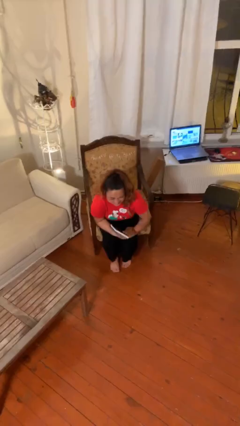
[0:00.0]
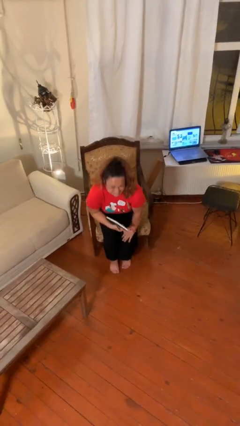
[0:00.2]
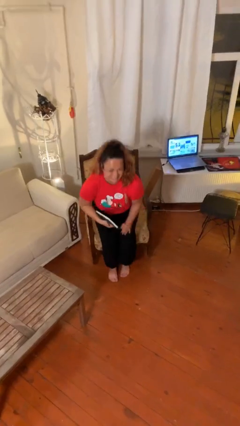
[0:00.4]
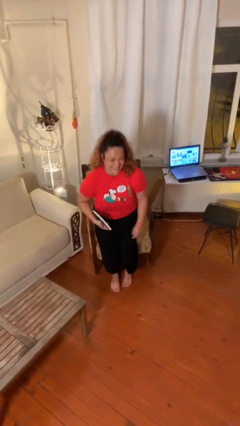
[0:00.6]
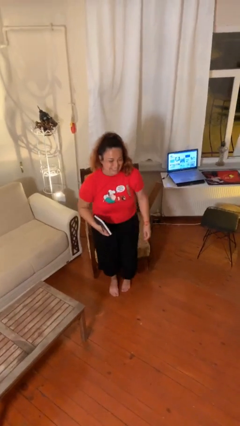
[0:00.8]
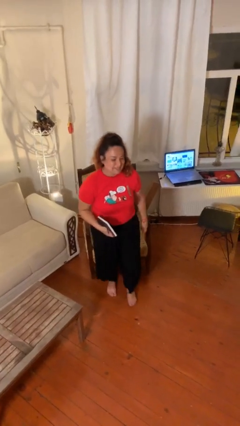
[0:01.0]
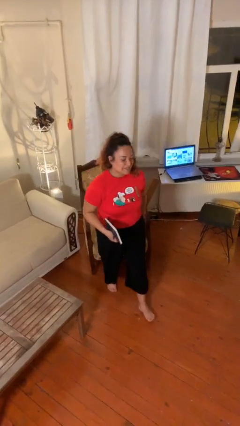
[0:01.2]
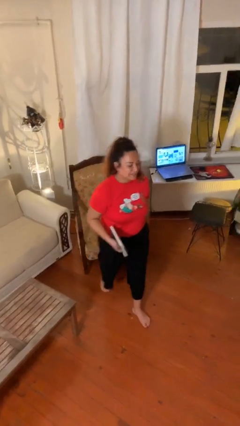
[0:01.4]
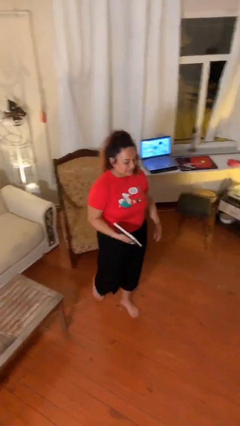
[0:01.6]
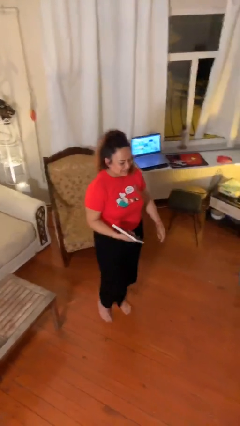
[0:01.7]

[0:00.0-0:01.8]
person stands up

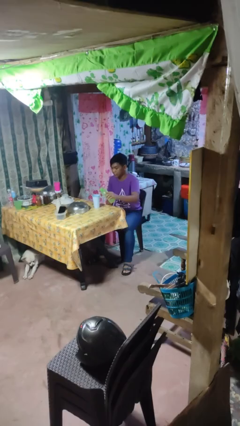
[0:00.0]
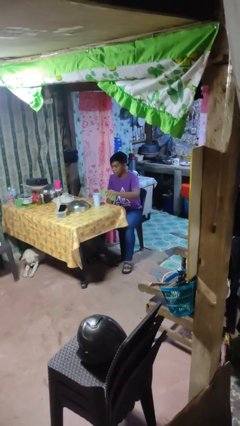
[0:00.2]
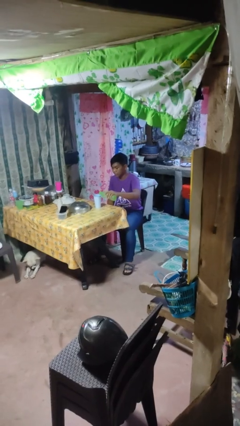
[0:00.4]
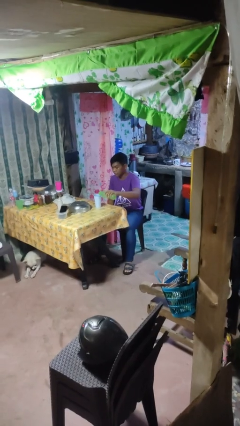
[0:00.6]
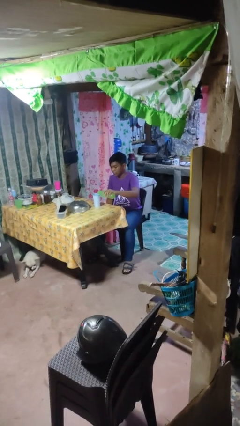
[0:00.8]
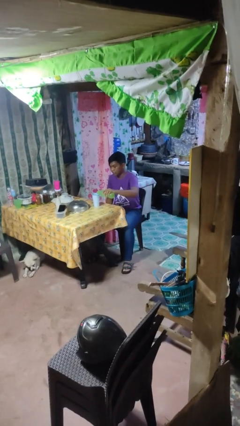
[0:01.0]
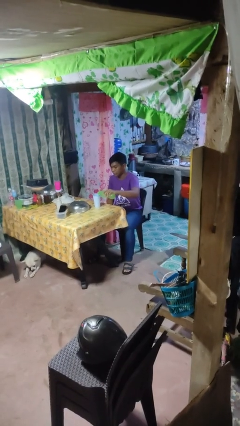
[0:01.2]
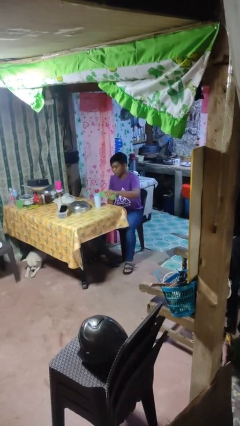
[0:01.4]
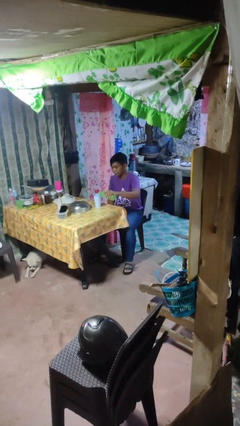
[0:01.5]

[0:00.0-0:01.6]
person pours liquid into cup

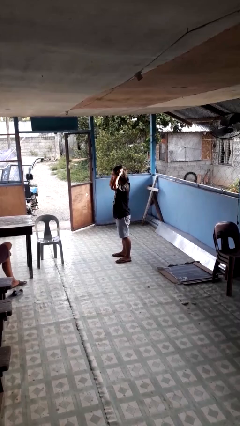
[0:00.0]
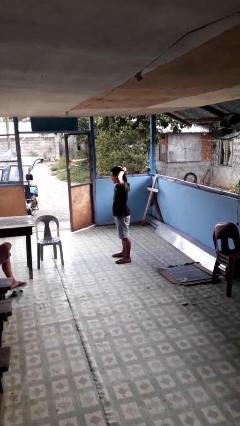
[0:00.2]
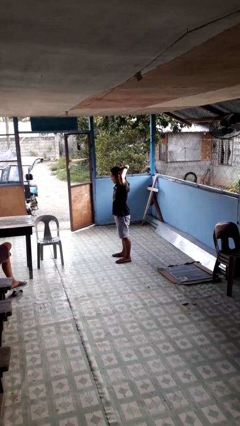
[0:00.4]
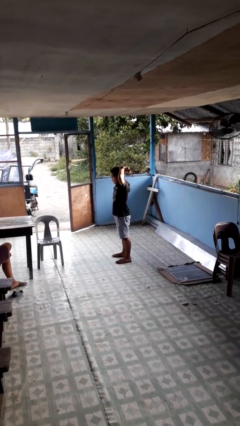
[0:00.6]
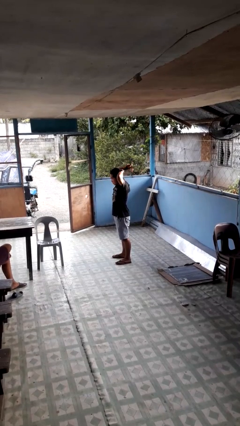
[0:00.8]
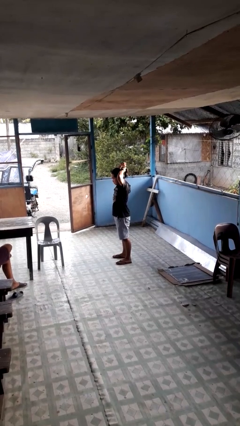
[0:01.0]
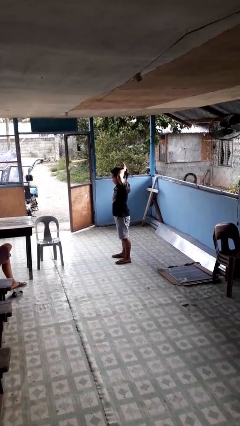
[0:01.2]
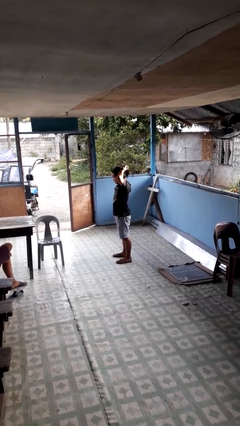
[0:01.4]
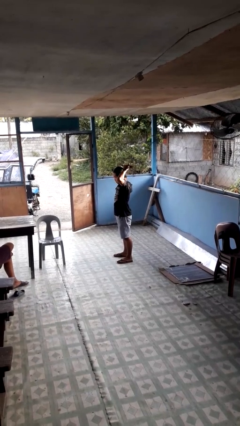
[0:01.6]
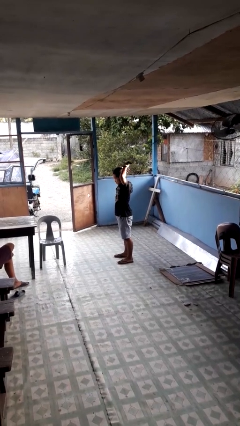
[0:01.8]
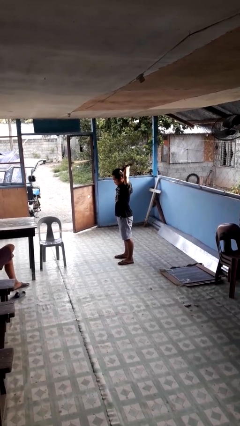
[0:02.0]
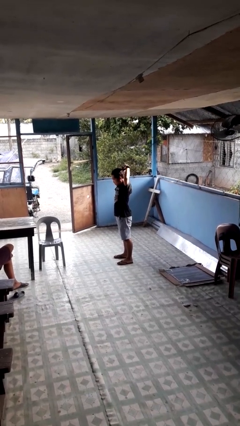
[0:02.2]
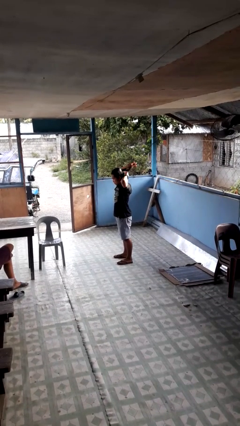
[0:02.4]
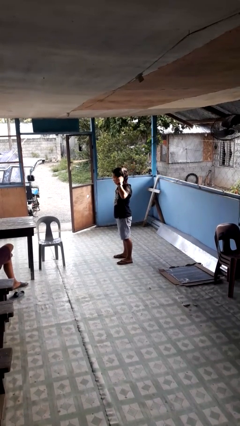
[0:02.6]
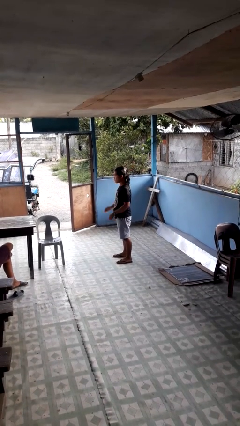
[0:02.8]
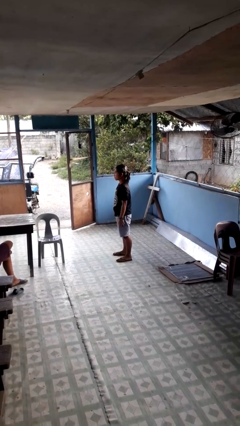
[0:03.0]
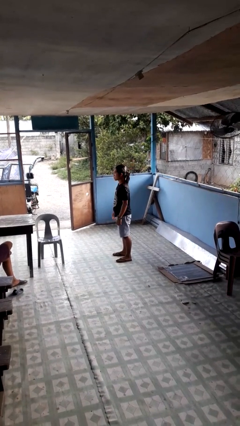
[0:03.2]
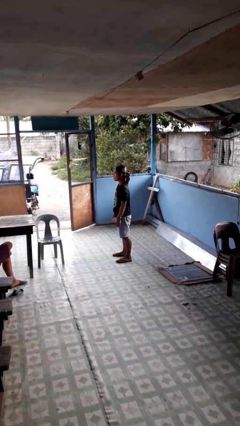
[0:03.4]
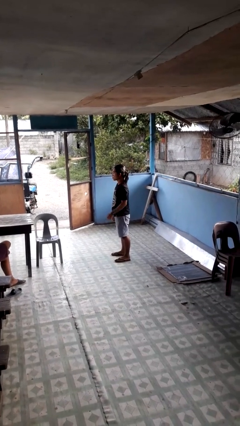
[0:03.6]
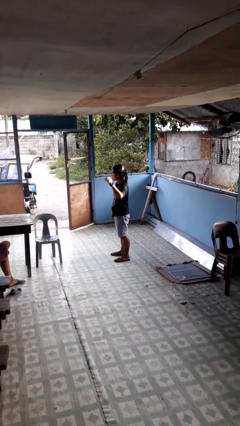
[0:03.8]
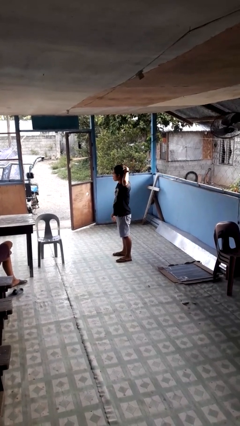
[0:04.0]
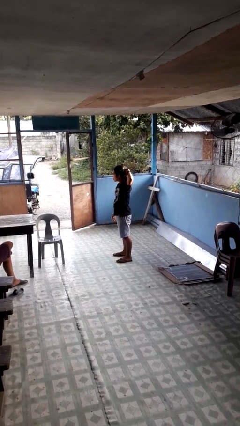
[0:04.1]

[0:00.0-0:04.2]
person puts hair in ponytail

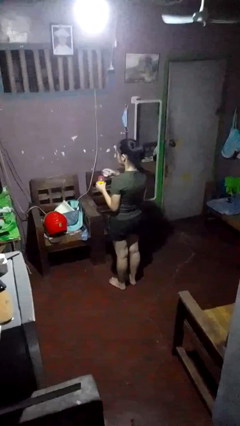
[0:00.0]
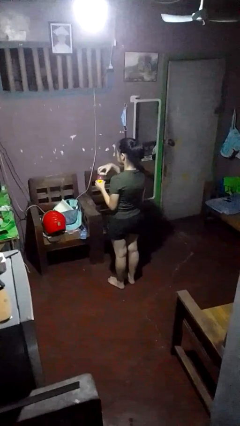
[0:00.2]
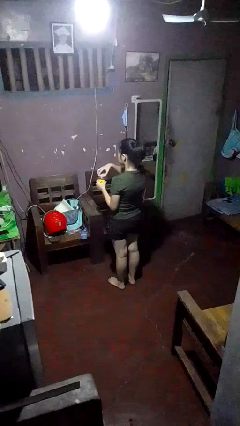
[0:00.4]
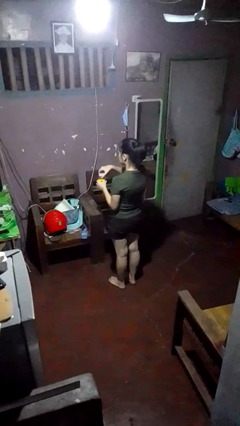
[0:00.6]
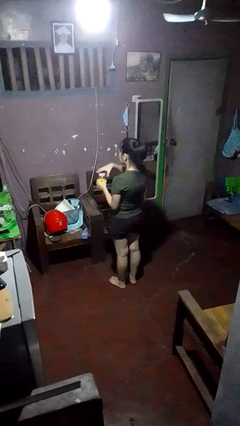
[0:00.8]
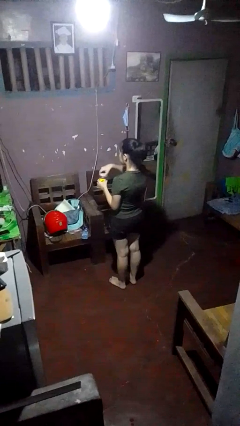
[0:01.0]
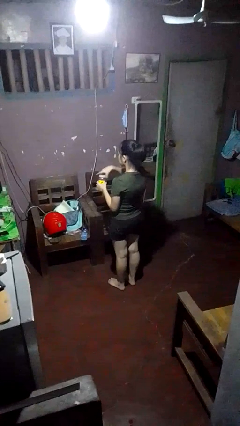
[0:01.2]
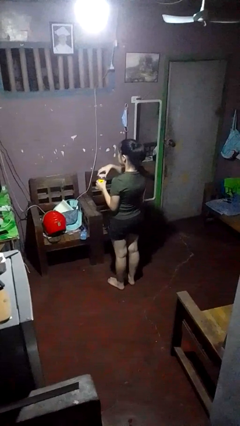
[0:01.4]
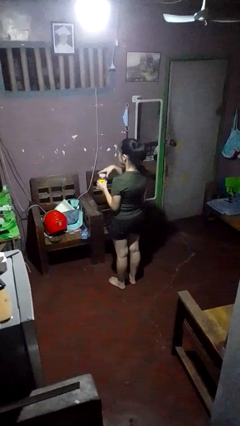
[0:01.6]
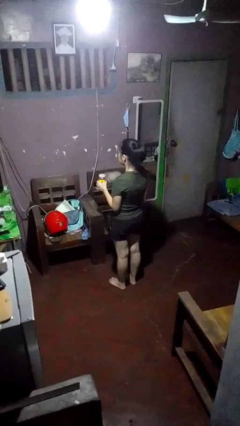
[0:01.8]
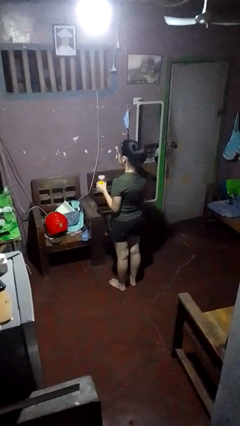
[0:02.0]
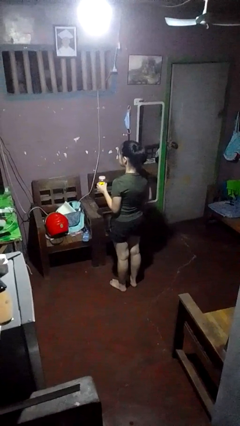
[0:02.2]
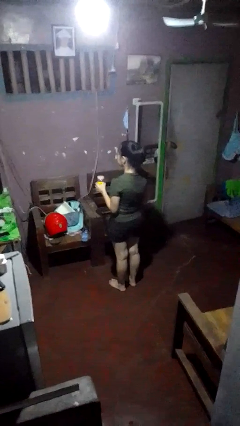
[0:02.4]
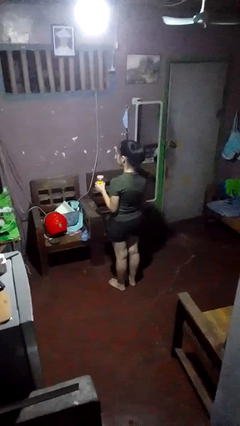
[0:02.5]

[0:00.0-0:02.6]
person closes jar

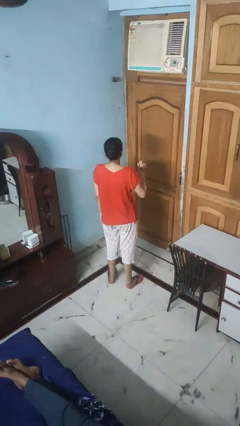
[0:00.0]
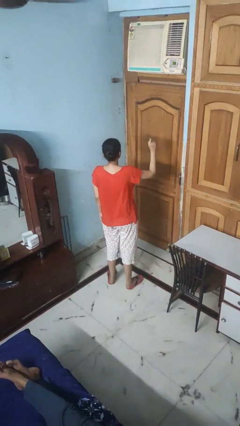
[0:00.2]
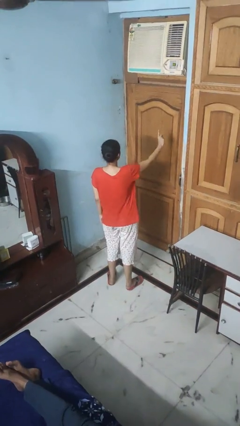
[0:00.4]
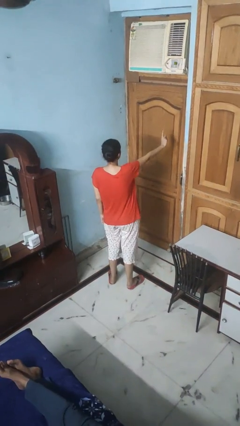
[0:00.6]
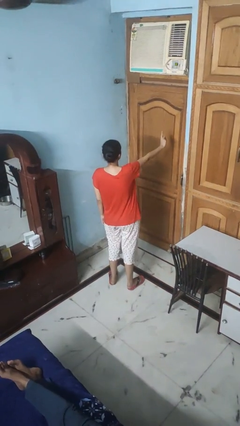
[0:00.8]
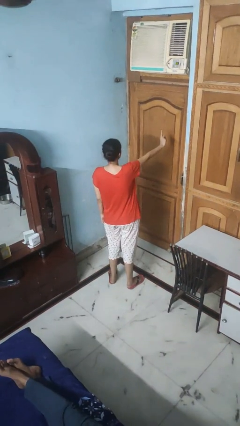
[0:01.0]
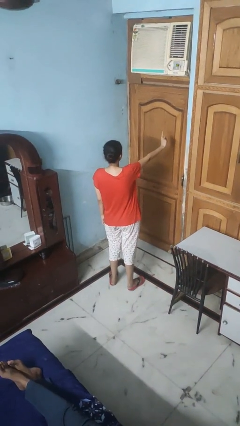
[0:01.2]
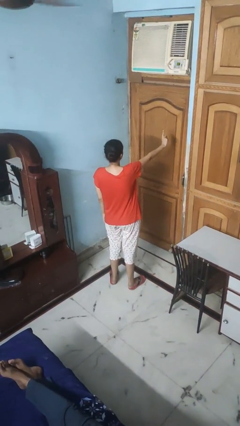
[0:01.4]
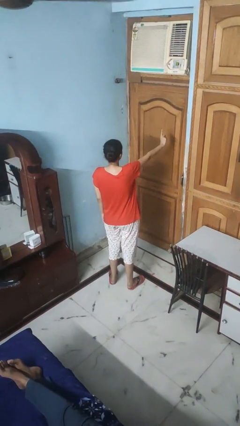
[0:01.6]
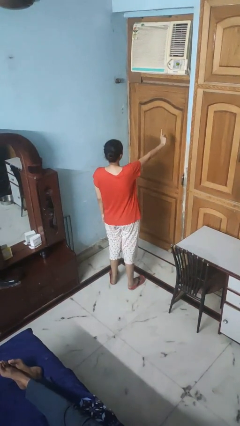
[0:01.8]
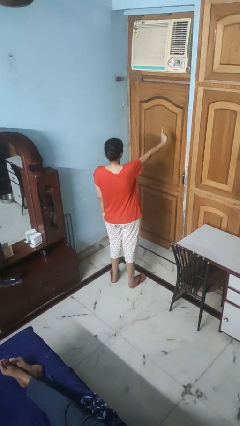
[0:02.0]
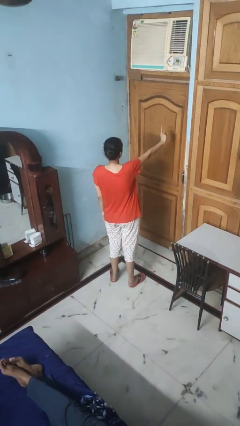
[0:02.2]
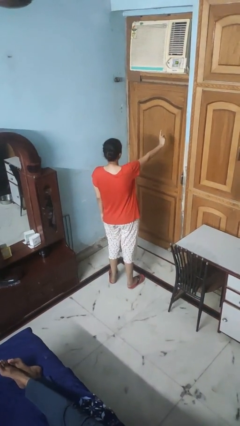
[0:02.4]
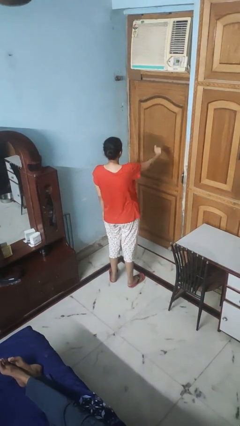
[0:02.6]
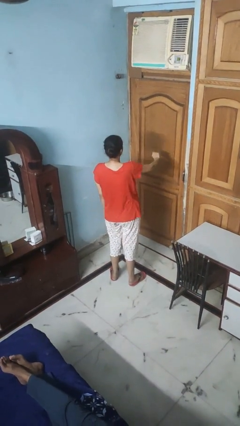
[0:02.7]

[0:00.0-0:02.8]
person gestures number one

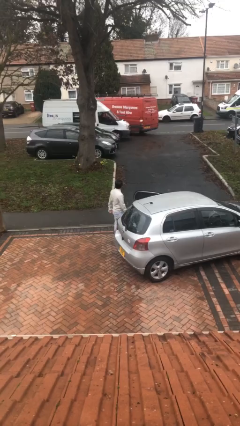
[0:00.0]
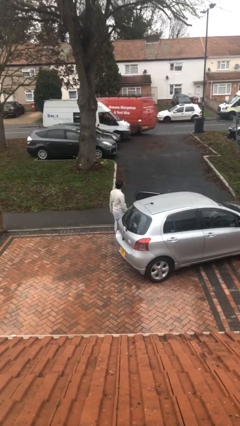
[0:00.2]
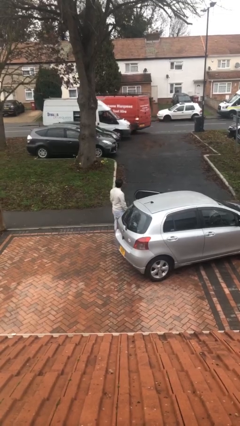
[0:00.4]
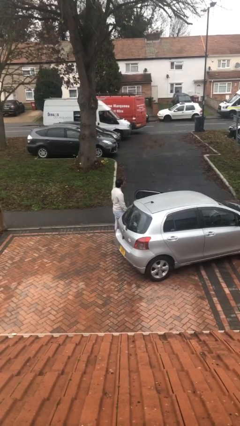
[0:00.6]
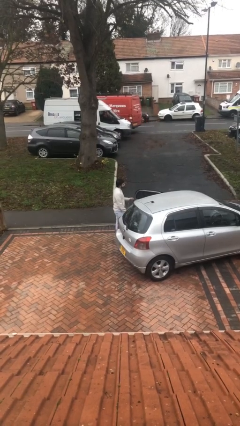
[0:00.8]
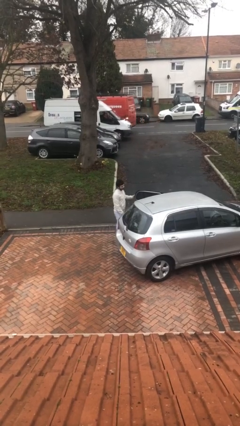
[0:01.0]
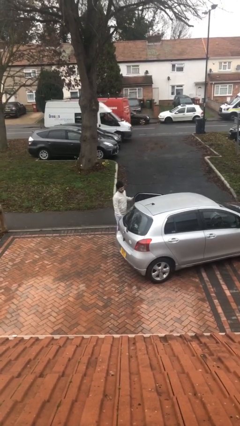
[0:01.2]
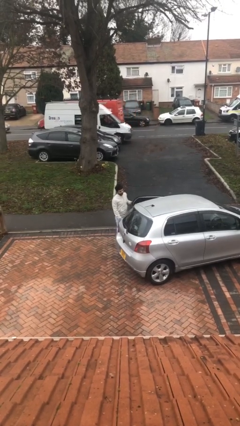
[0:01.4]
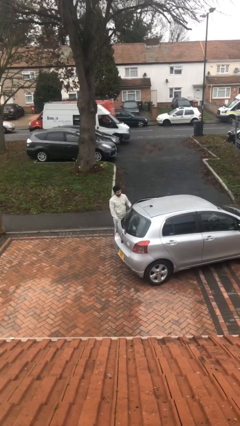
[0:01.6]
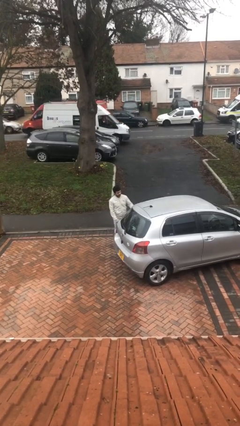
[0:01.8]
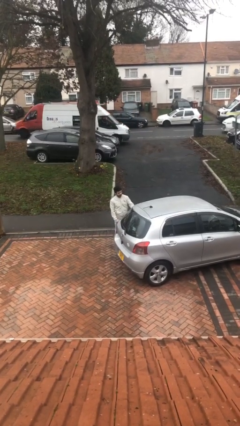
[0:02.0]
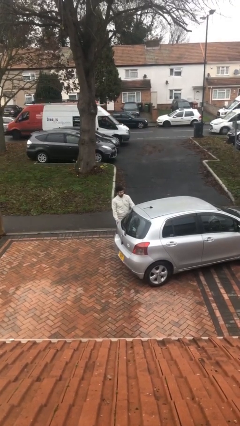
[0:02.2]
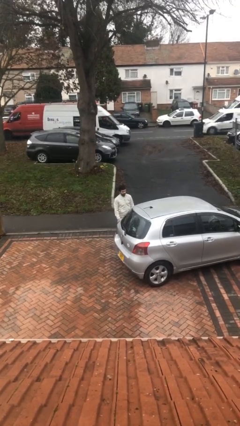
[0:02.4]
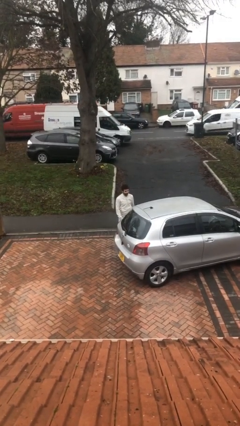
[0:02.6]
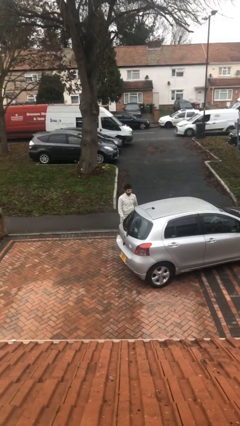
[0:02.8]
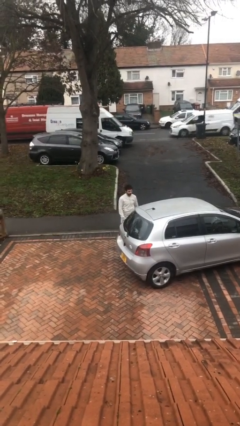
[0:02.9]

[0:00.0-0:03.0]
person closes car door

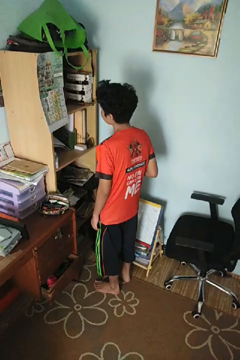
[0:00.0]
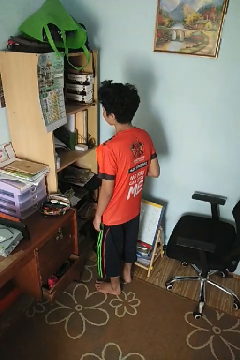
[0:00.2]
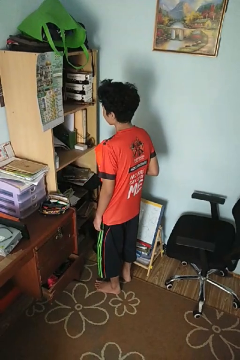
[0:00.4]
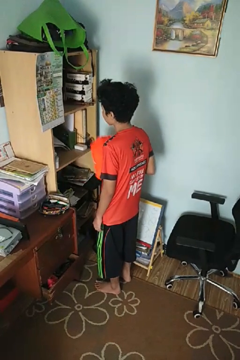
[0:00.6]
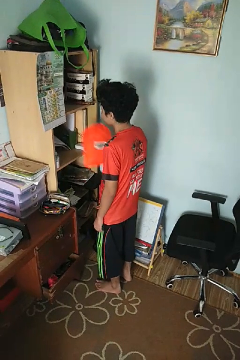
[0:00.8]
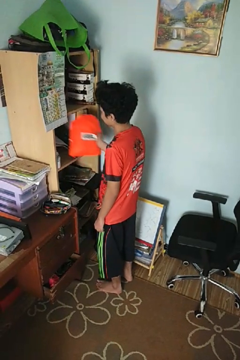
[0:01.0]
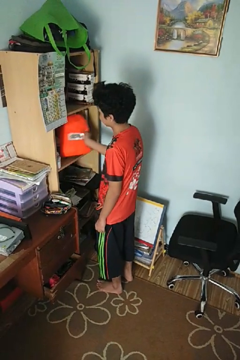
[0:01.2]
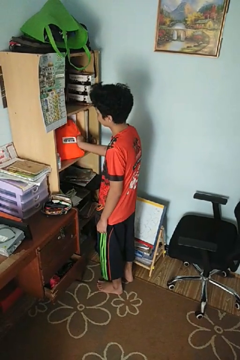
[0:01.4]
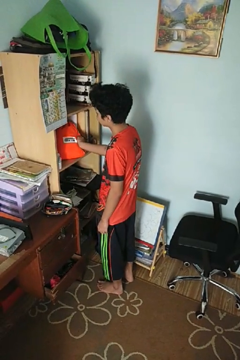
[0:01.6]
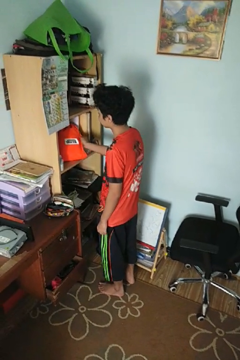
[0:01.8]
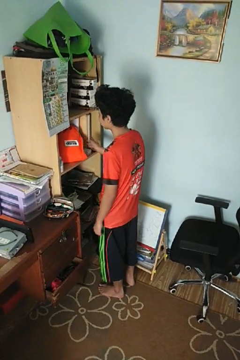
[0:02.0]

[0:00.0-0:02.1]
person puts down object into cabinet
